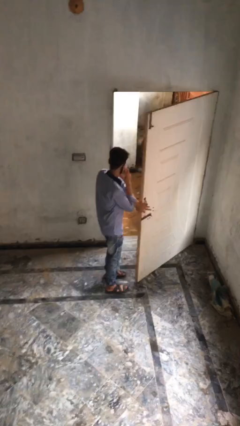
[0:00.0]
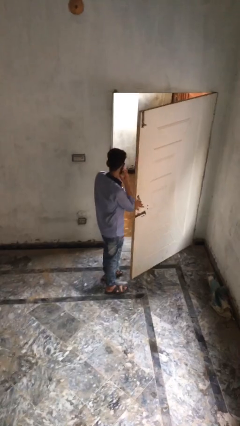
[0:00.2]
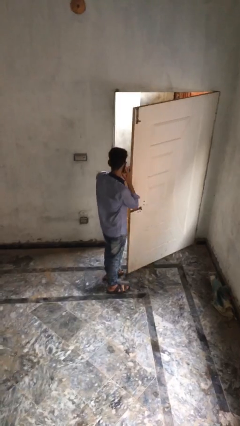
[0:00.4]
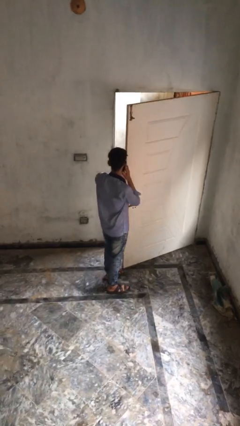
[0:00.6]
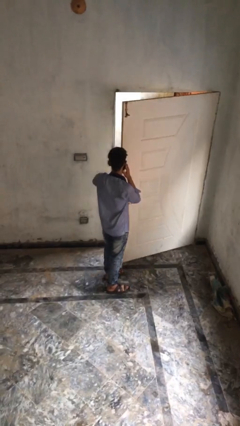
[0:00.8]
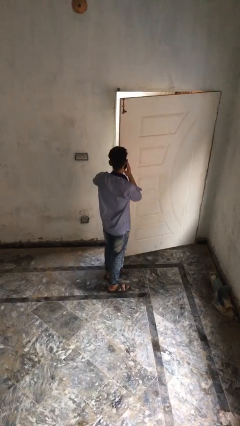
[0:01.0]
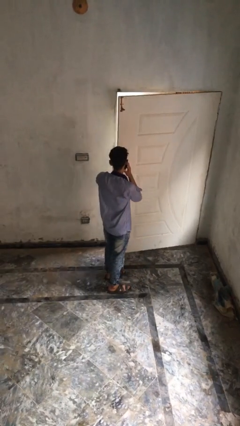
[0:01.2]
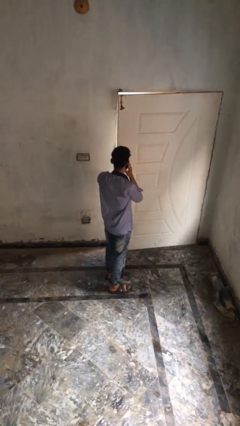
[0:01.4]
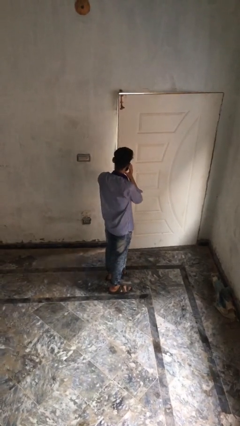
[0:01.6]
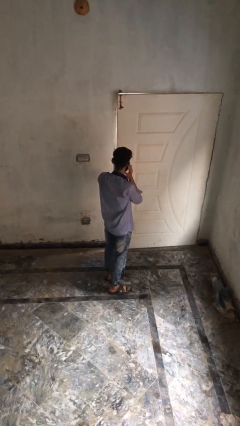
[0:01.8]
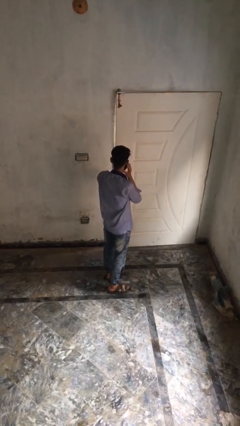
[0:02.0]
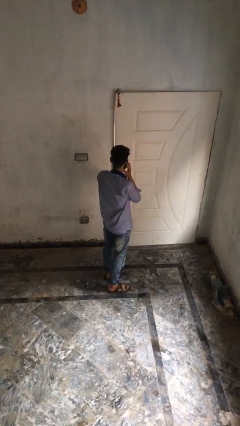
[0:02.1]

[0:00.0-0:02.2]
person closes facility door

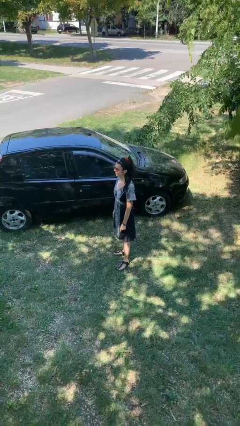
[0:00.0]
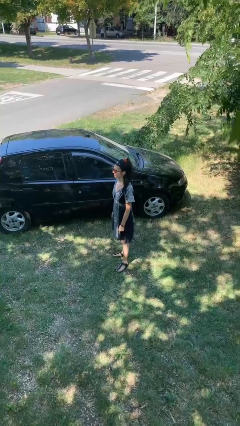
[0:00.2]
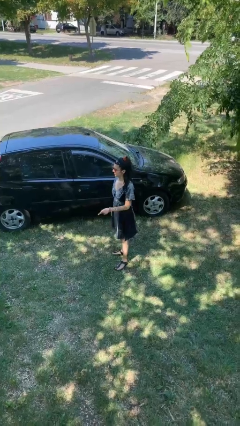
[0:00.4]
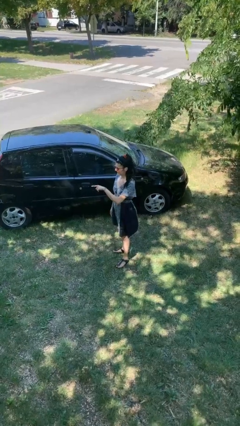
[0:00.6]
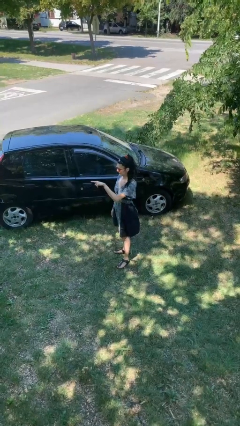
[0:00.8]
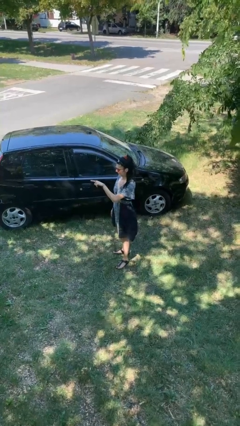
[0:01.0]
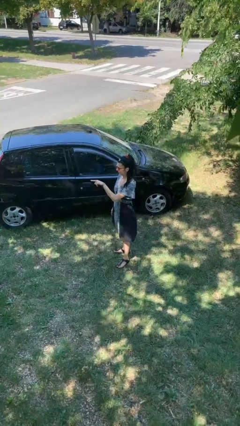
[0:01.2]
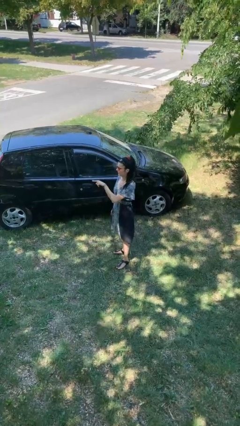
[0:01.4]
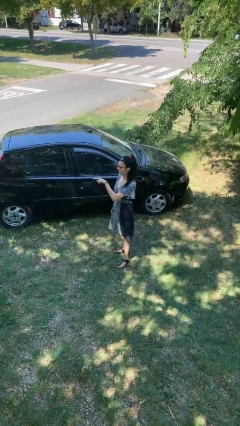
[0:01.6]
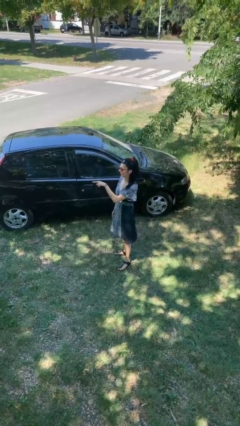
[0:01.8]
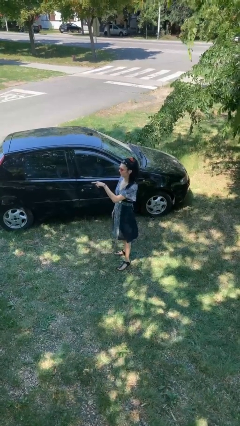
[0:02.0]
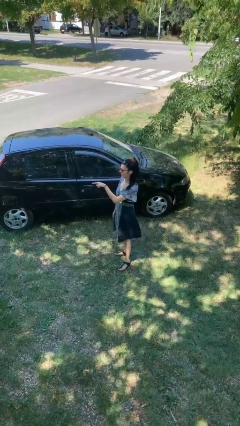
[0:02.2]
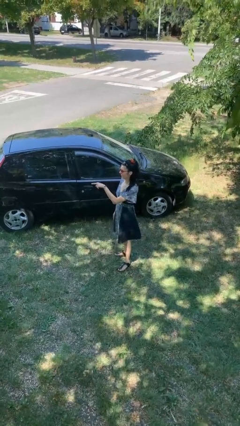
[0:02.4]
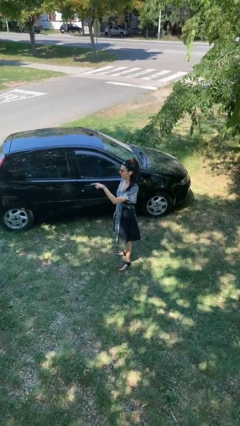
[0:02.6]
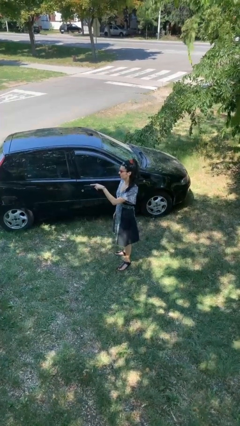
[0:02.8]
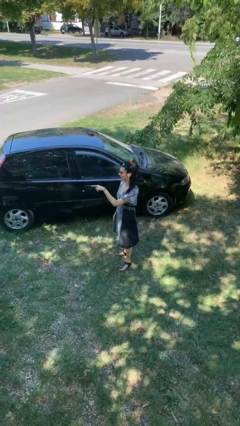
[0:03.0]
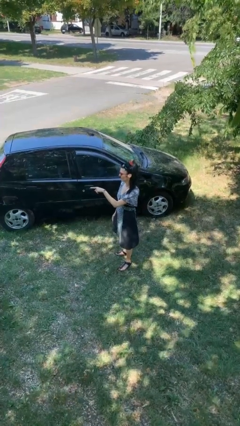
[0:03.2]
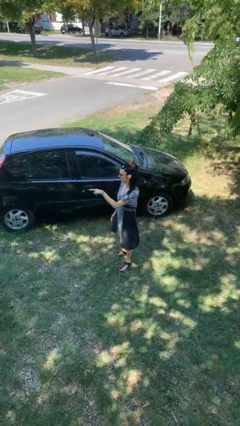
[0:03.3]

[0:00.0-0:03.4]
person points at person

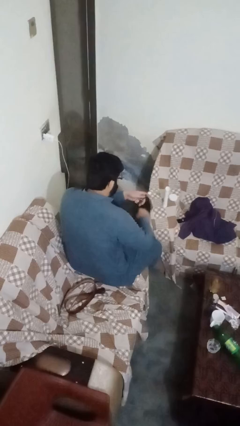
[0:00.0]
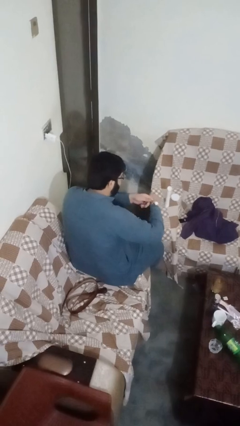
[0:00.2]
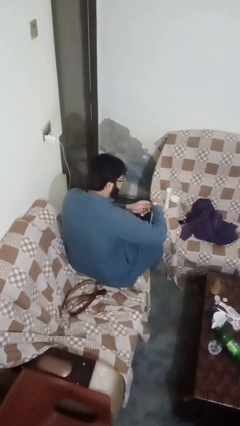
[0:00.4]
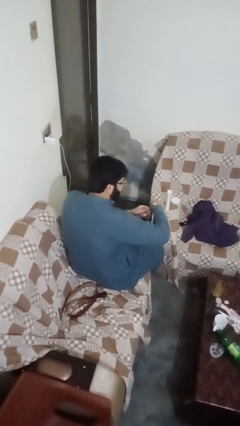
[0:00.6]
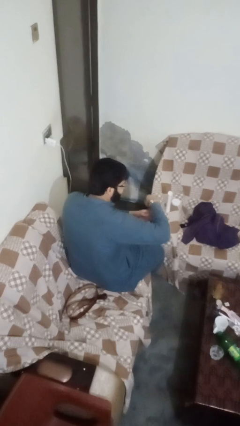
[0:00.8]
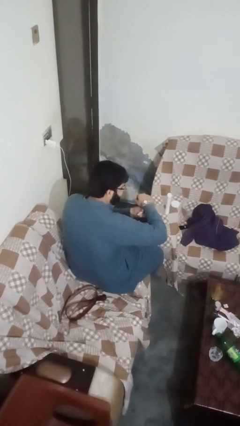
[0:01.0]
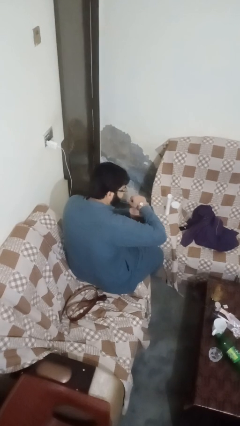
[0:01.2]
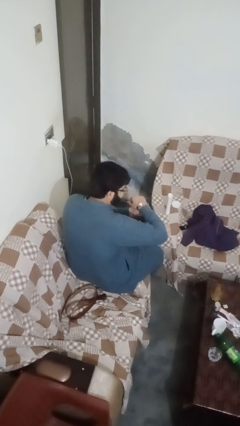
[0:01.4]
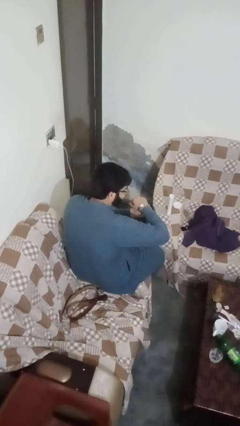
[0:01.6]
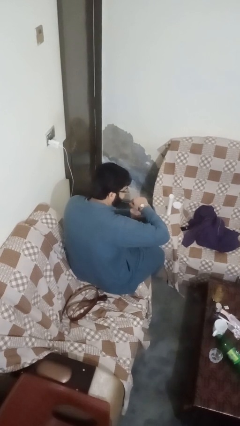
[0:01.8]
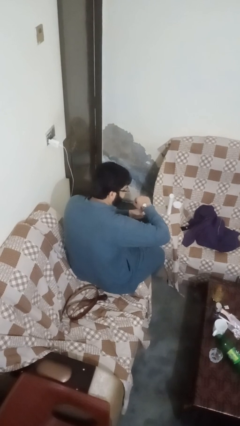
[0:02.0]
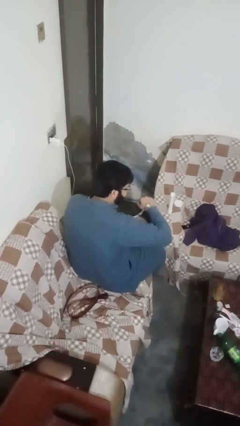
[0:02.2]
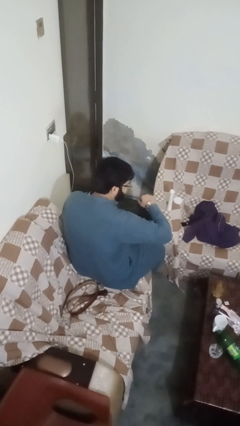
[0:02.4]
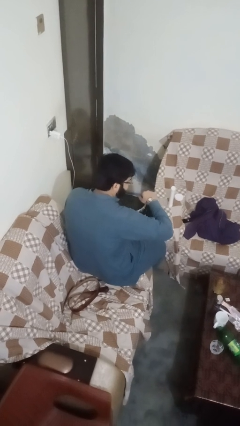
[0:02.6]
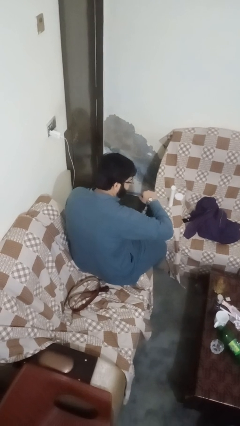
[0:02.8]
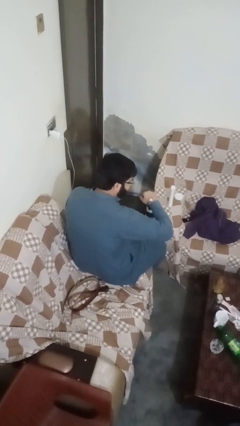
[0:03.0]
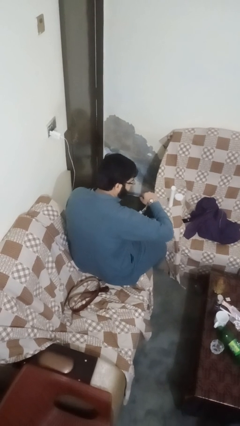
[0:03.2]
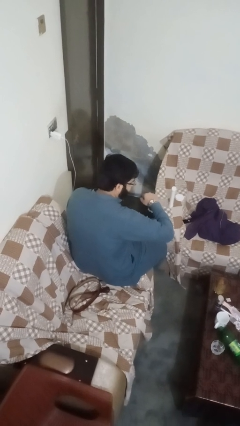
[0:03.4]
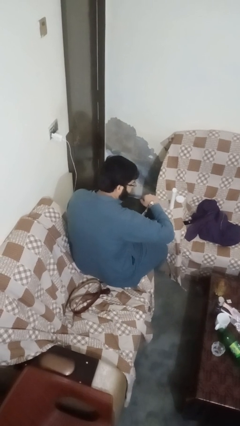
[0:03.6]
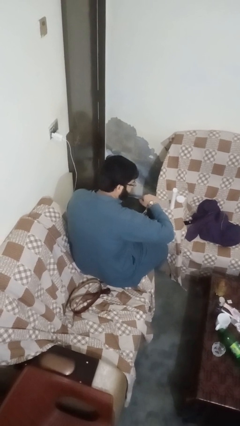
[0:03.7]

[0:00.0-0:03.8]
person puts on wristwatch

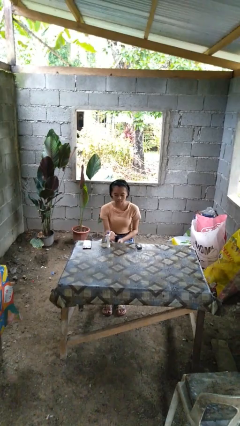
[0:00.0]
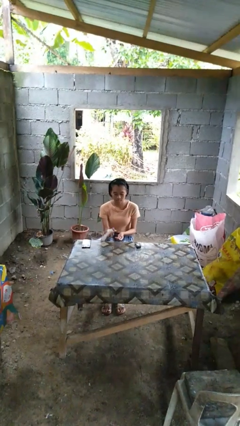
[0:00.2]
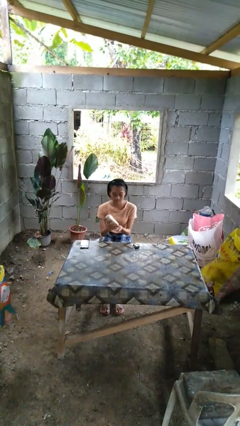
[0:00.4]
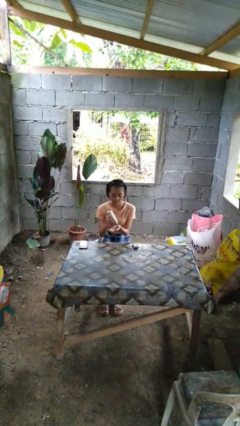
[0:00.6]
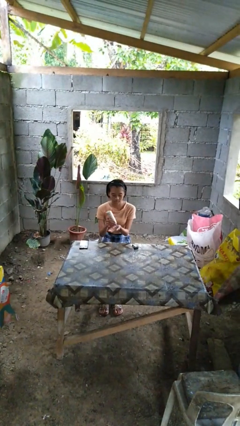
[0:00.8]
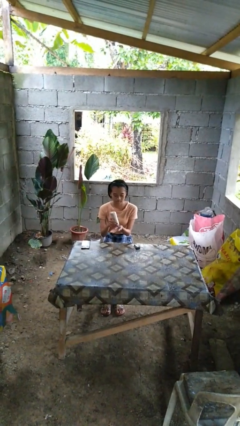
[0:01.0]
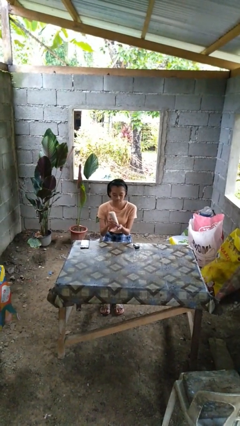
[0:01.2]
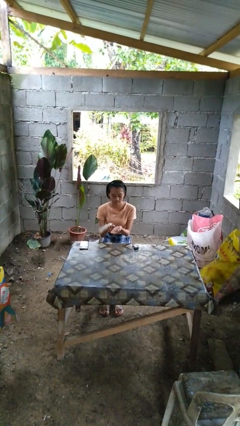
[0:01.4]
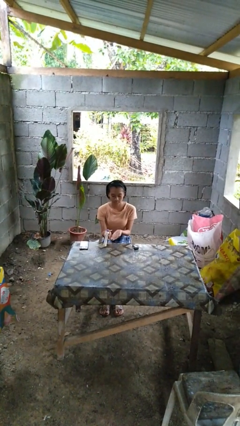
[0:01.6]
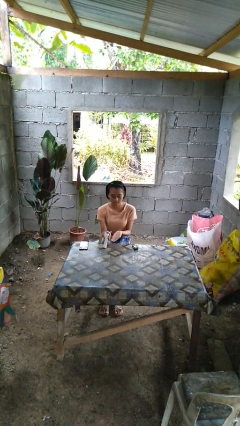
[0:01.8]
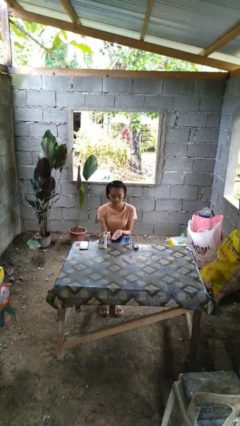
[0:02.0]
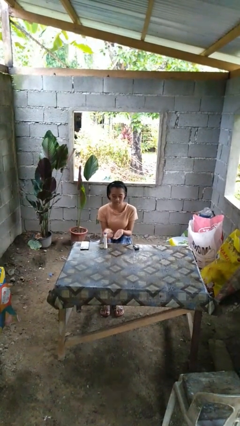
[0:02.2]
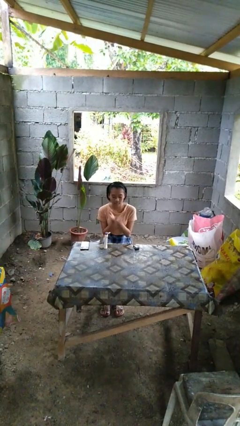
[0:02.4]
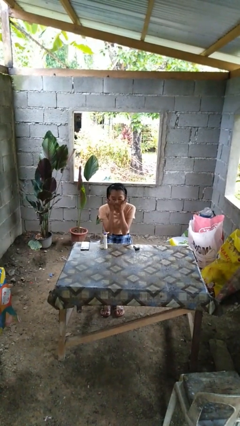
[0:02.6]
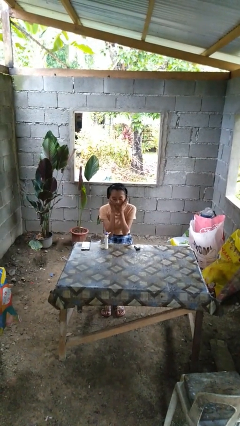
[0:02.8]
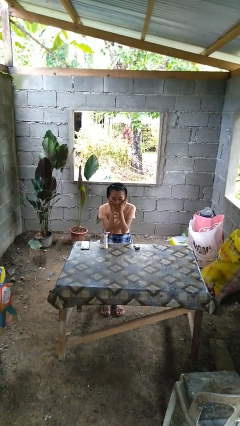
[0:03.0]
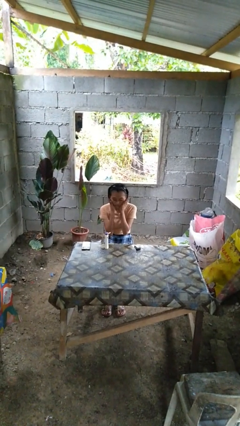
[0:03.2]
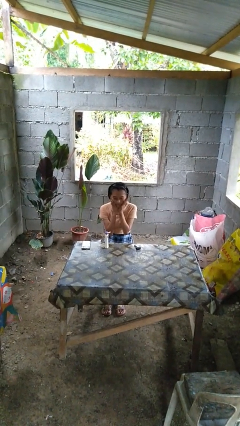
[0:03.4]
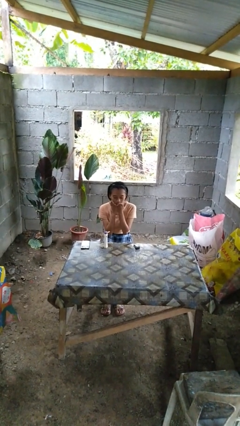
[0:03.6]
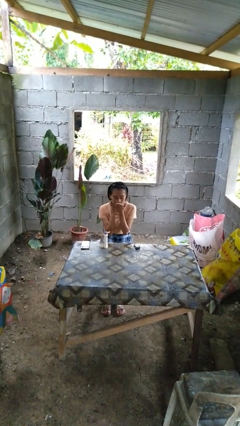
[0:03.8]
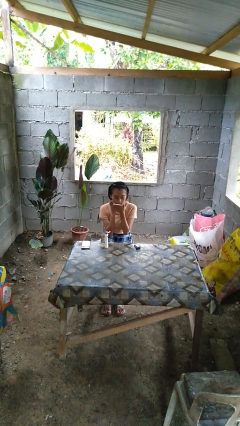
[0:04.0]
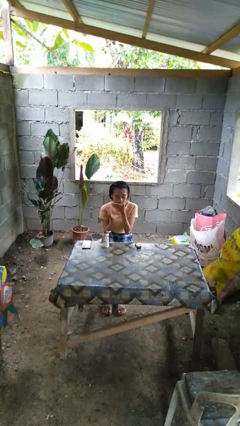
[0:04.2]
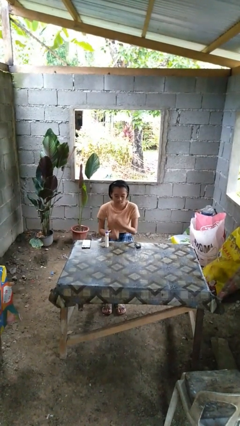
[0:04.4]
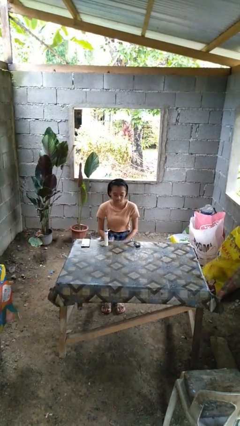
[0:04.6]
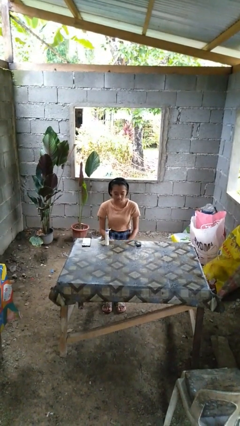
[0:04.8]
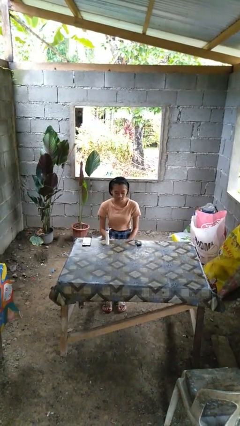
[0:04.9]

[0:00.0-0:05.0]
person applies shaving cream

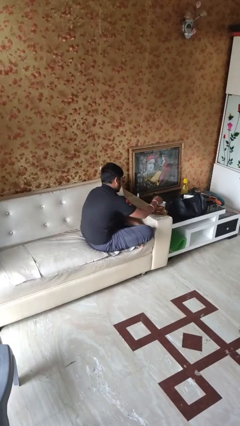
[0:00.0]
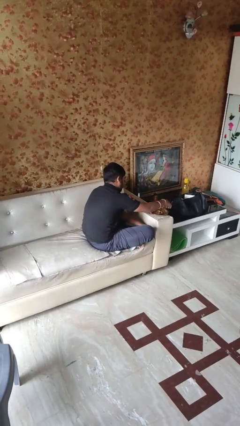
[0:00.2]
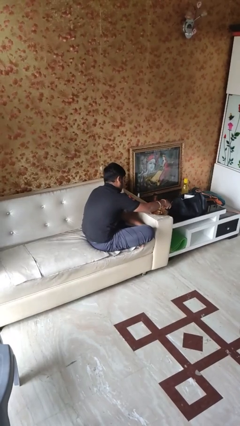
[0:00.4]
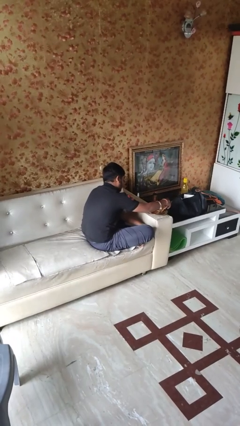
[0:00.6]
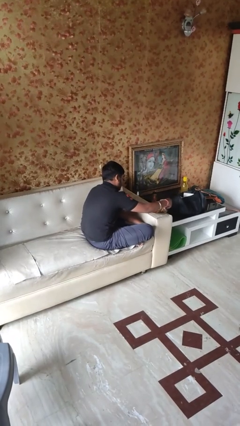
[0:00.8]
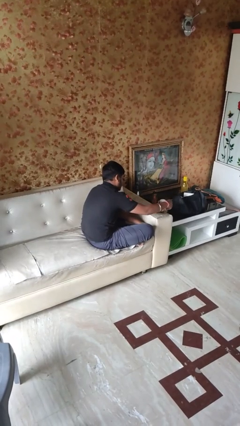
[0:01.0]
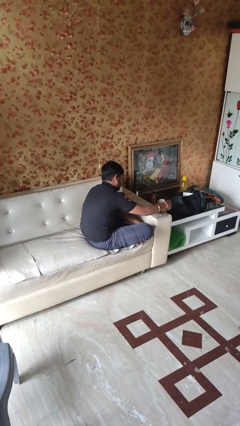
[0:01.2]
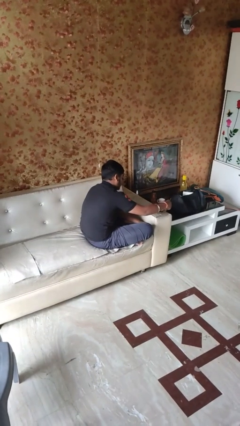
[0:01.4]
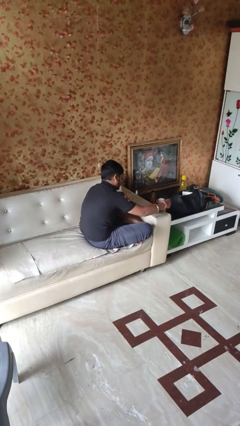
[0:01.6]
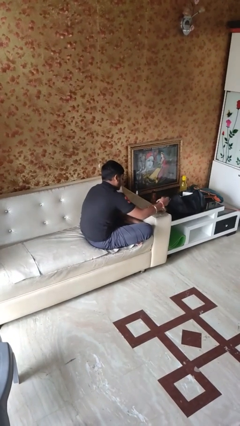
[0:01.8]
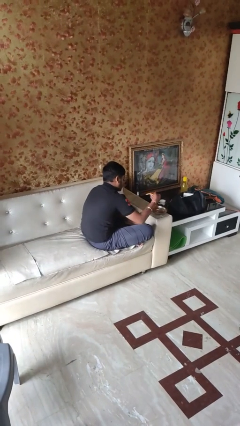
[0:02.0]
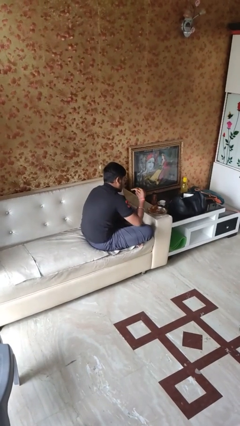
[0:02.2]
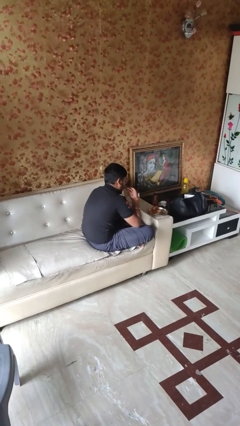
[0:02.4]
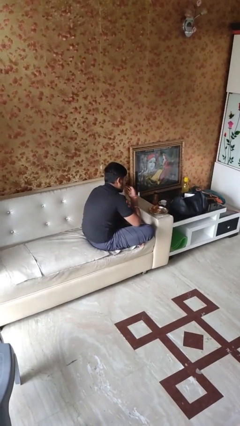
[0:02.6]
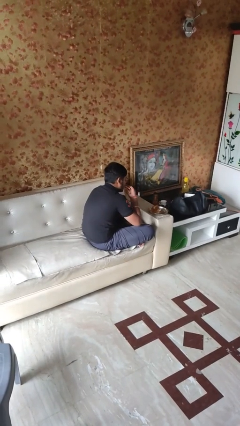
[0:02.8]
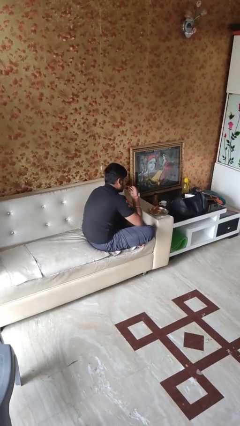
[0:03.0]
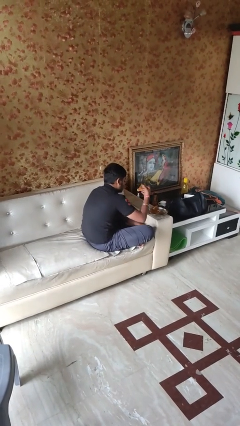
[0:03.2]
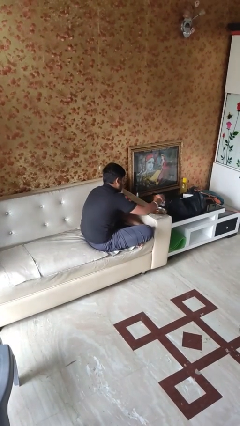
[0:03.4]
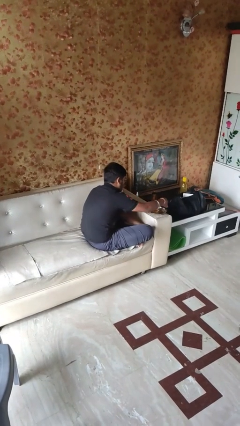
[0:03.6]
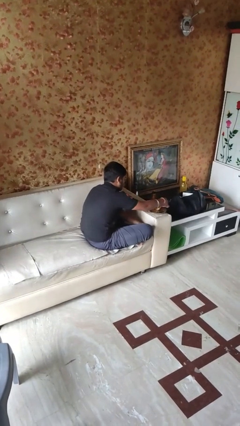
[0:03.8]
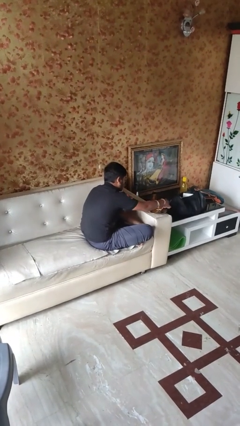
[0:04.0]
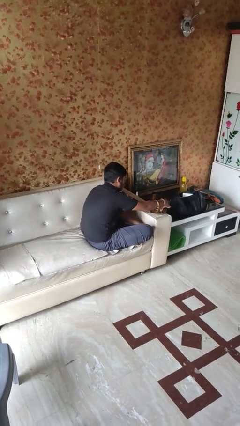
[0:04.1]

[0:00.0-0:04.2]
person eats with hands
